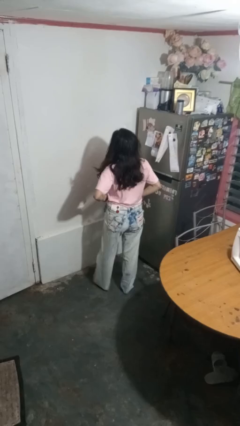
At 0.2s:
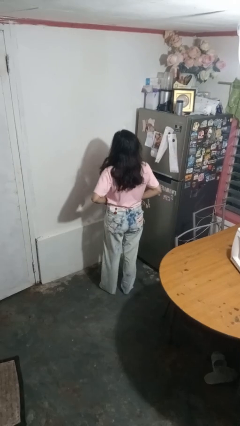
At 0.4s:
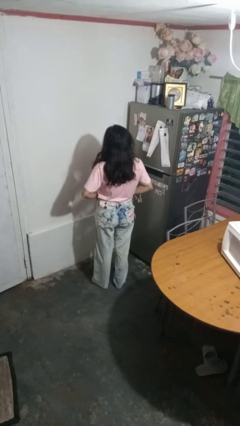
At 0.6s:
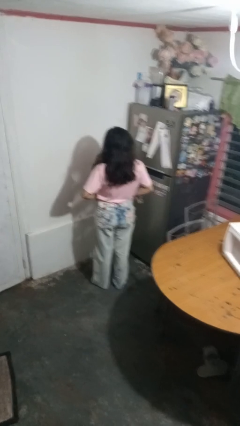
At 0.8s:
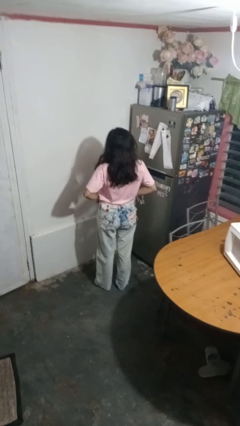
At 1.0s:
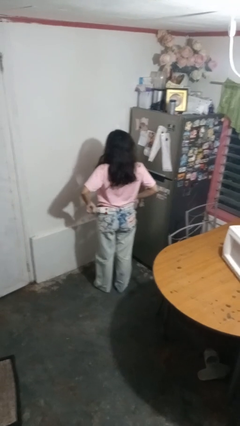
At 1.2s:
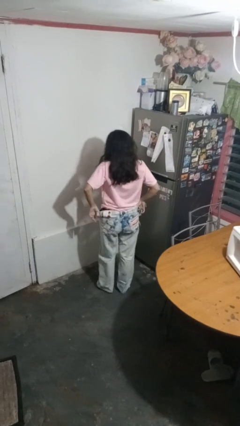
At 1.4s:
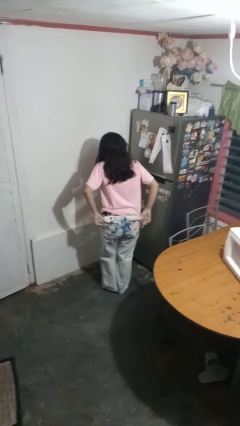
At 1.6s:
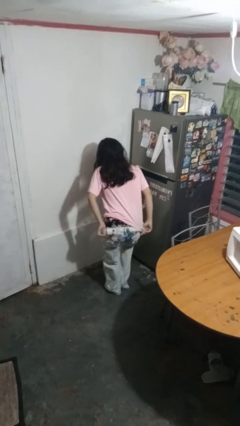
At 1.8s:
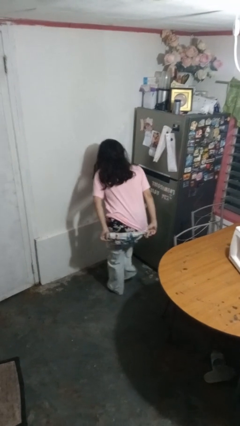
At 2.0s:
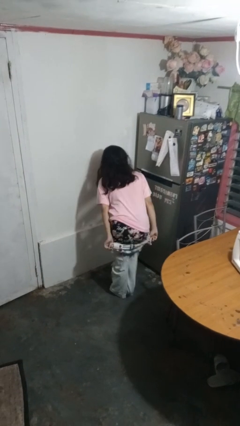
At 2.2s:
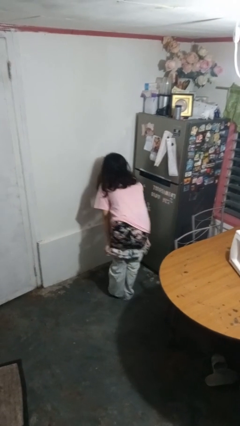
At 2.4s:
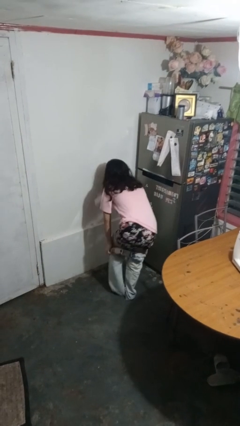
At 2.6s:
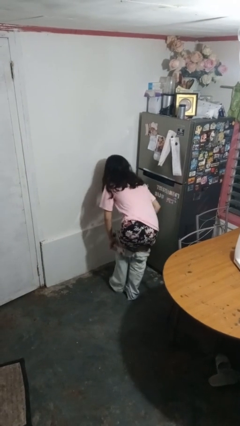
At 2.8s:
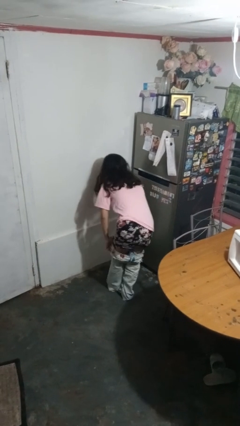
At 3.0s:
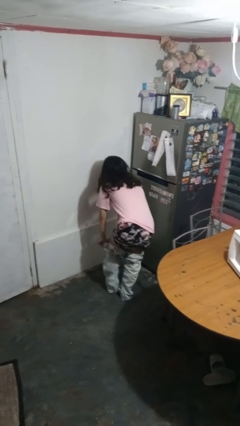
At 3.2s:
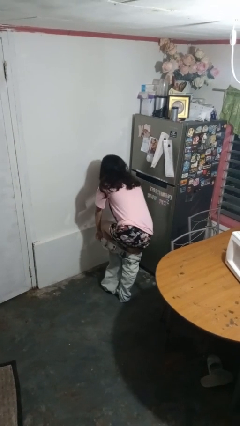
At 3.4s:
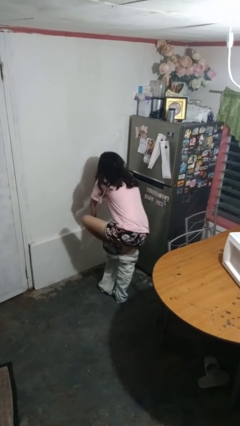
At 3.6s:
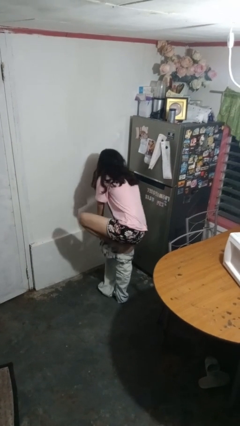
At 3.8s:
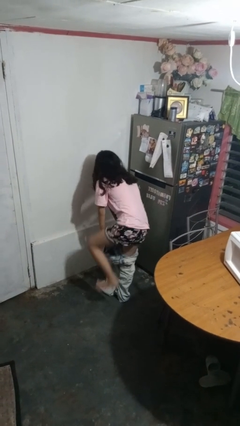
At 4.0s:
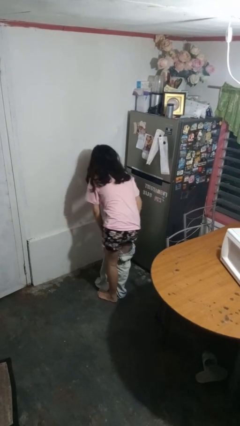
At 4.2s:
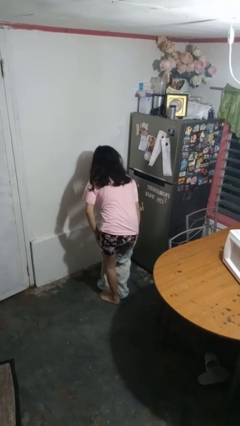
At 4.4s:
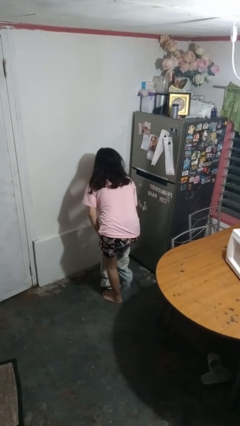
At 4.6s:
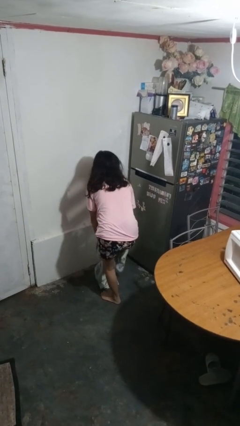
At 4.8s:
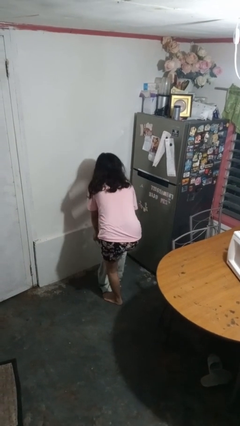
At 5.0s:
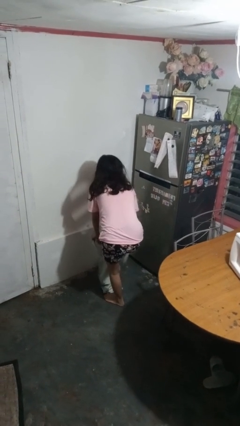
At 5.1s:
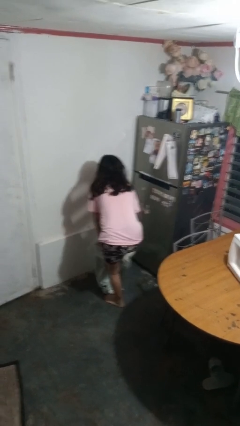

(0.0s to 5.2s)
person takes off pants

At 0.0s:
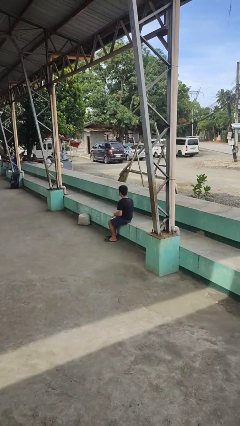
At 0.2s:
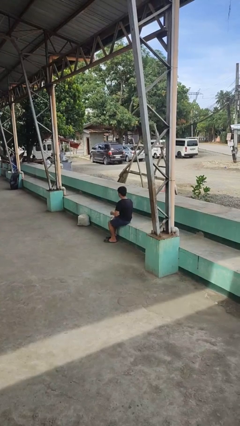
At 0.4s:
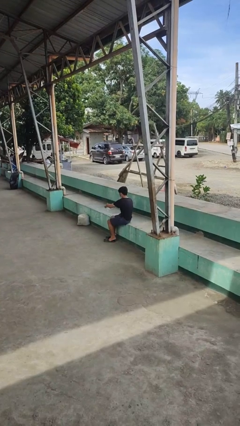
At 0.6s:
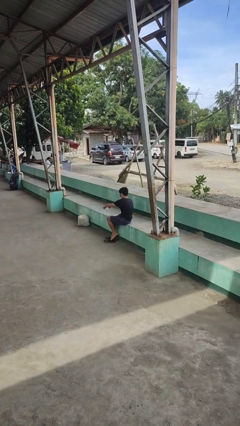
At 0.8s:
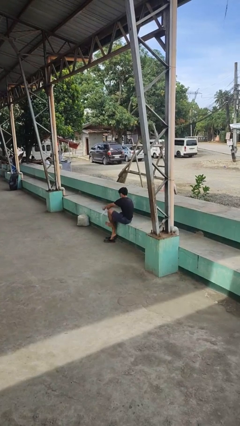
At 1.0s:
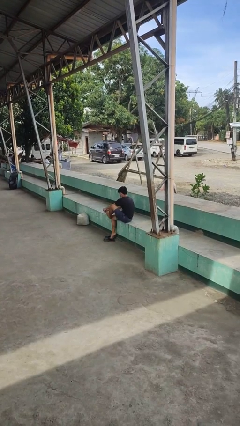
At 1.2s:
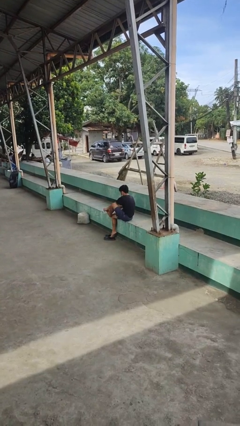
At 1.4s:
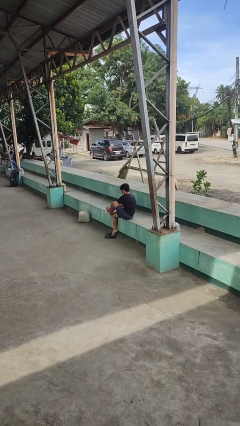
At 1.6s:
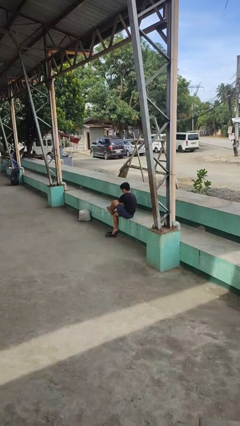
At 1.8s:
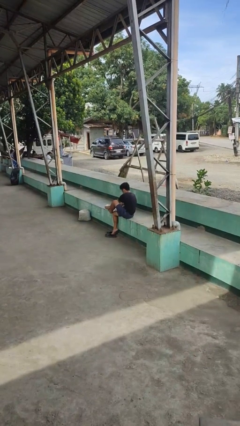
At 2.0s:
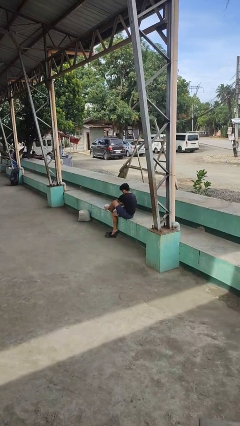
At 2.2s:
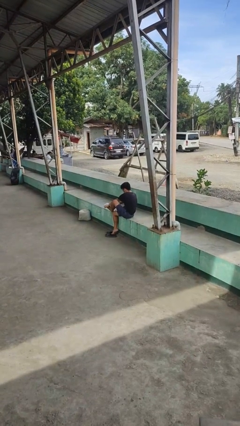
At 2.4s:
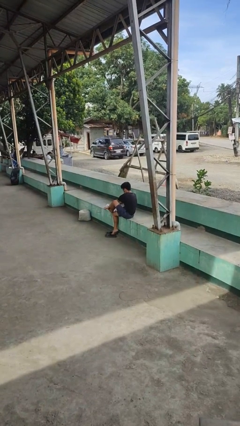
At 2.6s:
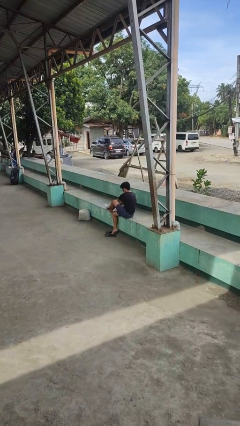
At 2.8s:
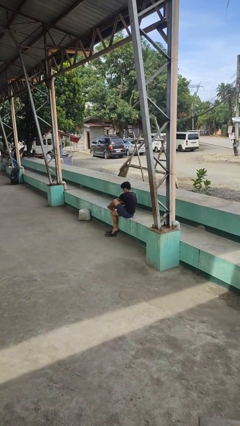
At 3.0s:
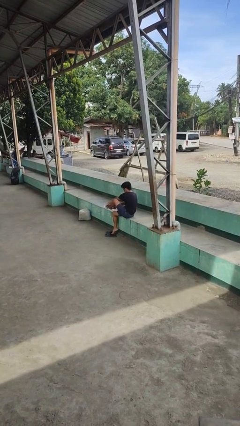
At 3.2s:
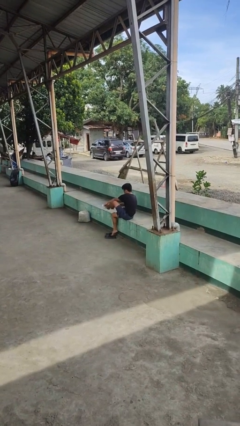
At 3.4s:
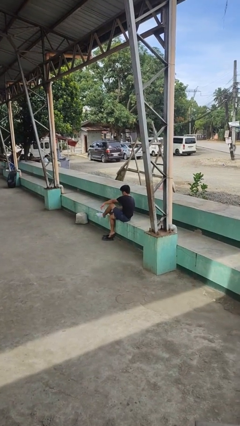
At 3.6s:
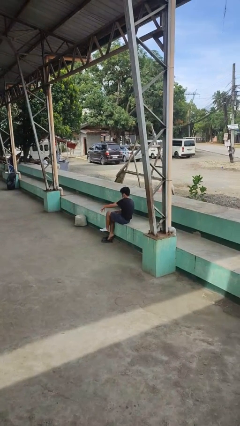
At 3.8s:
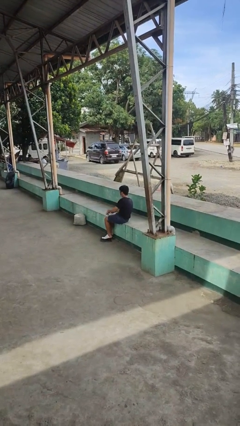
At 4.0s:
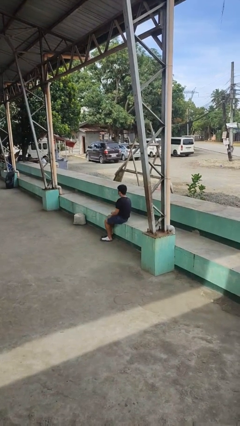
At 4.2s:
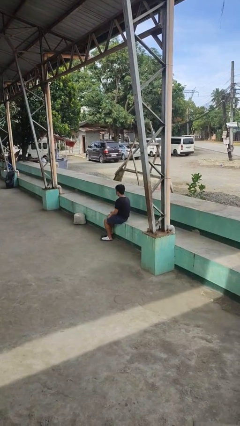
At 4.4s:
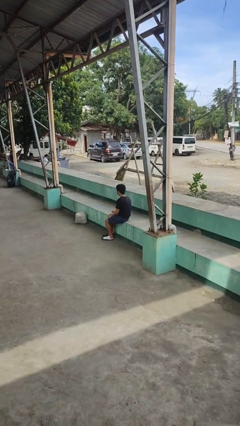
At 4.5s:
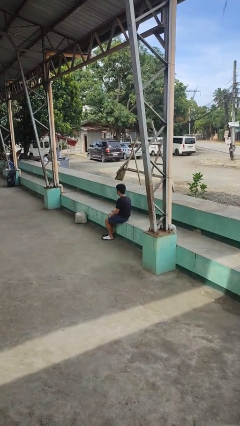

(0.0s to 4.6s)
person puts on socks

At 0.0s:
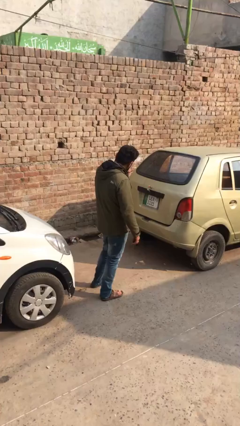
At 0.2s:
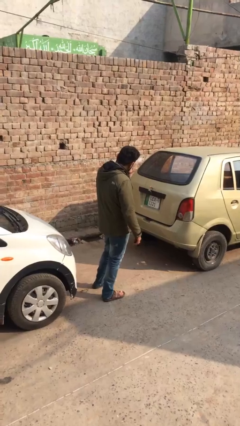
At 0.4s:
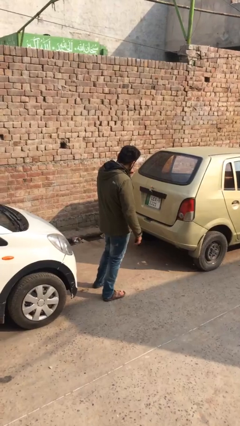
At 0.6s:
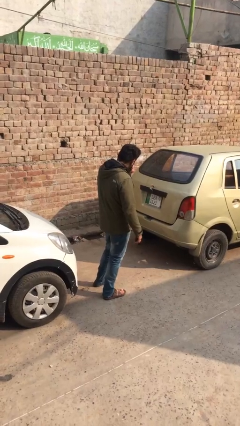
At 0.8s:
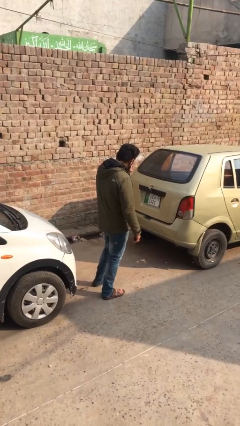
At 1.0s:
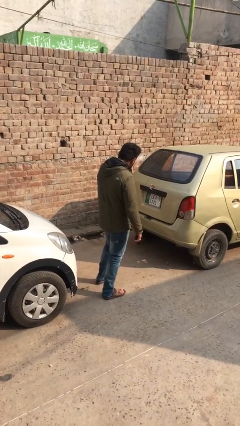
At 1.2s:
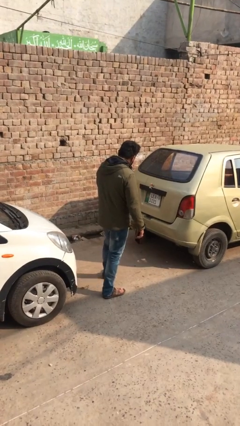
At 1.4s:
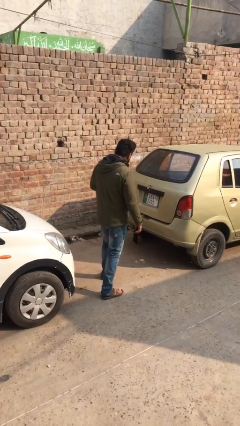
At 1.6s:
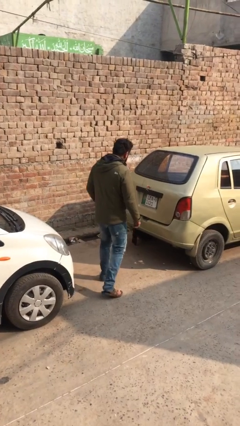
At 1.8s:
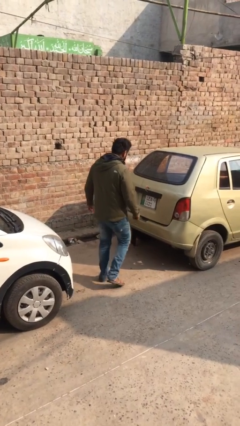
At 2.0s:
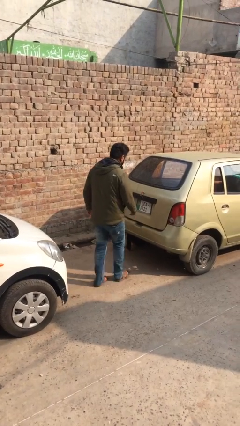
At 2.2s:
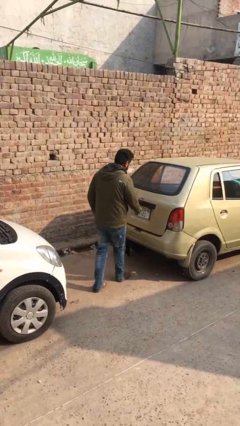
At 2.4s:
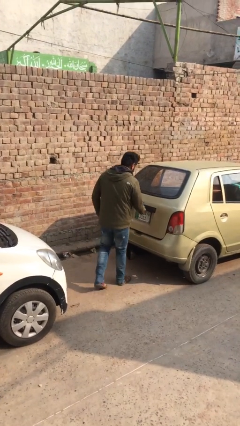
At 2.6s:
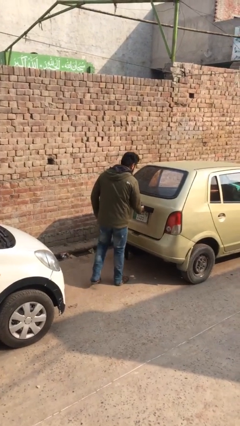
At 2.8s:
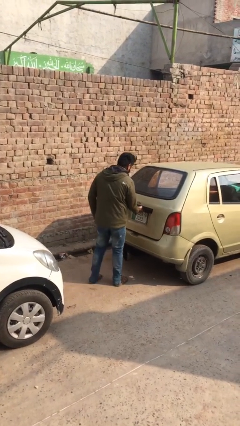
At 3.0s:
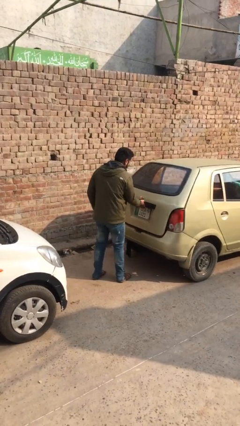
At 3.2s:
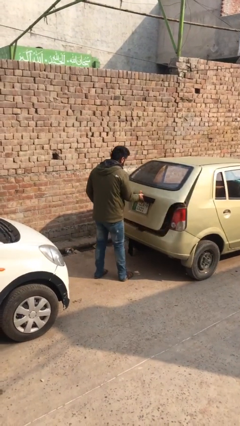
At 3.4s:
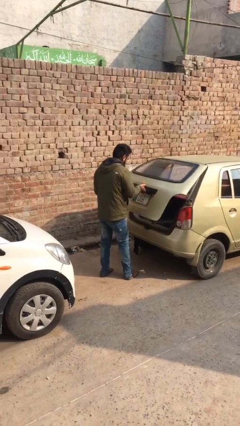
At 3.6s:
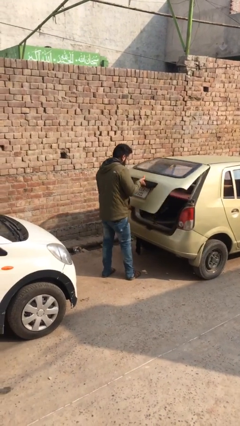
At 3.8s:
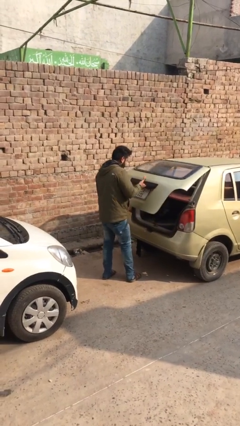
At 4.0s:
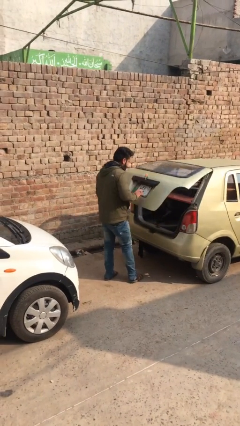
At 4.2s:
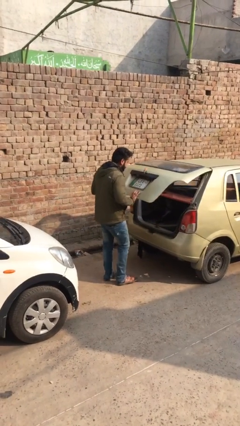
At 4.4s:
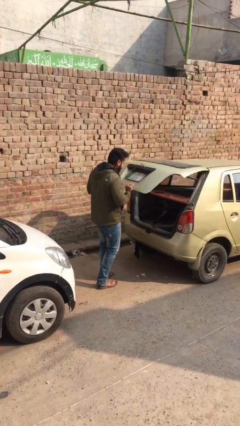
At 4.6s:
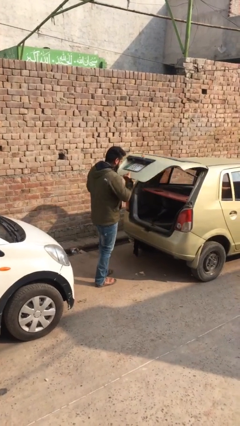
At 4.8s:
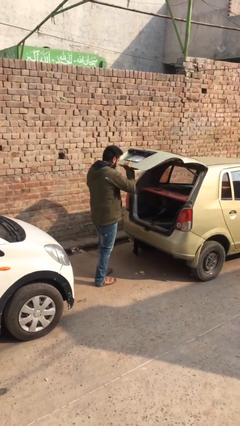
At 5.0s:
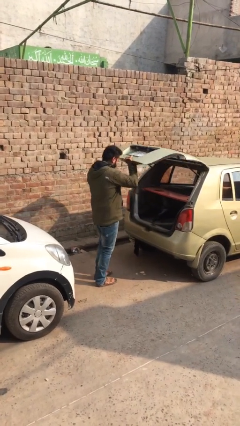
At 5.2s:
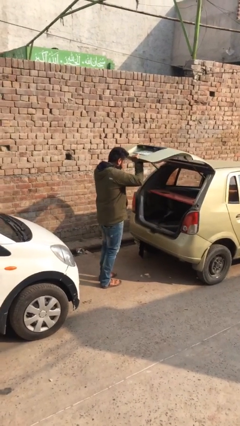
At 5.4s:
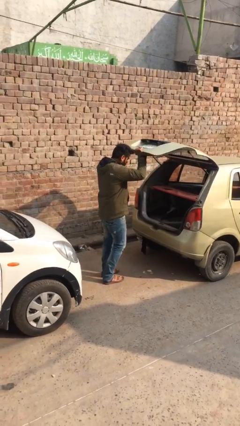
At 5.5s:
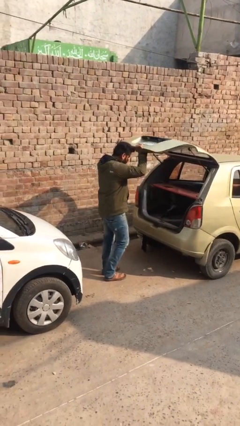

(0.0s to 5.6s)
person opens car trunk

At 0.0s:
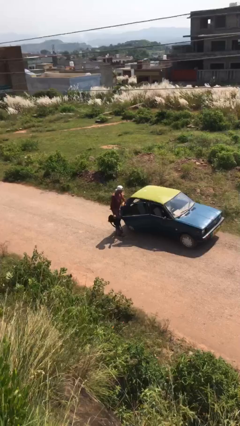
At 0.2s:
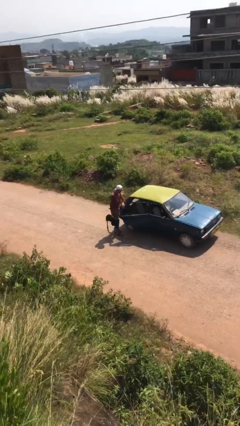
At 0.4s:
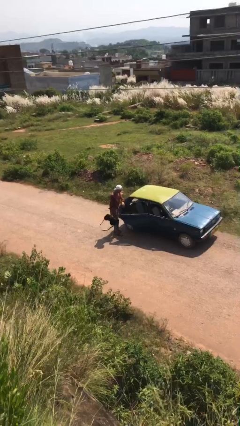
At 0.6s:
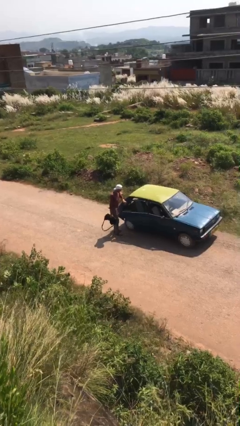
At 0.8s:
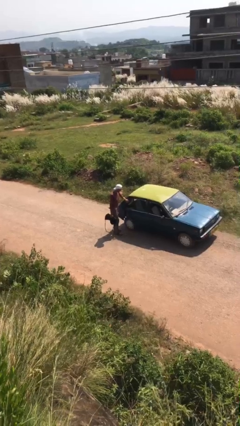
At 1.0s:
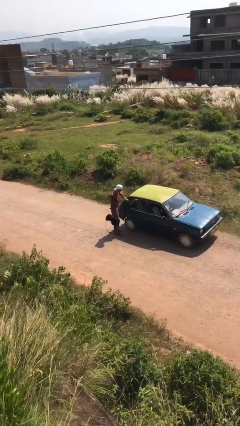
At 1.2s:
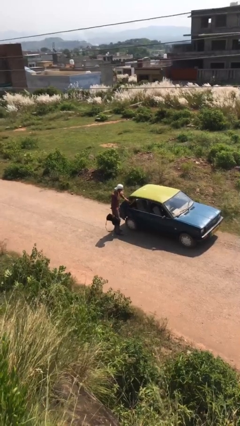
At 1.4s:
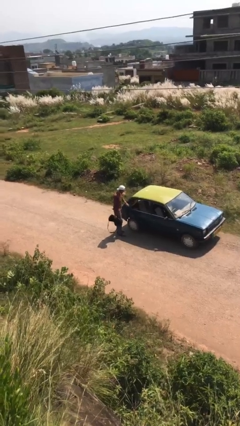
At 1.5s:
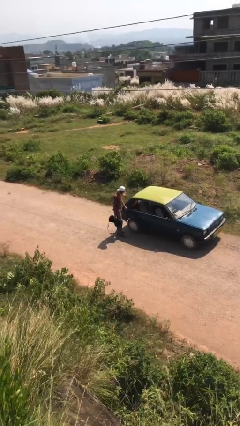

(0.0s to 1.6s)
person closes car door

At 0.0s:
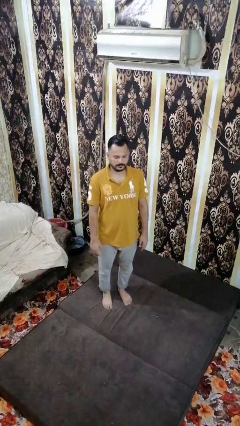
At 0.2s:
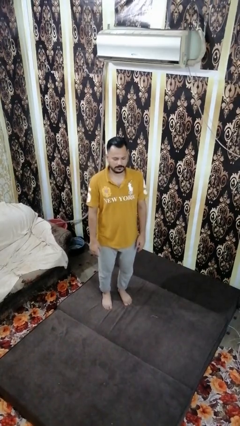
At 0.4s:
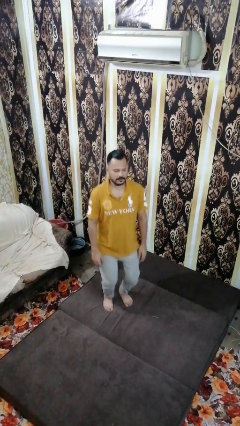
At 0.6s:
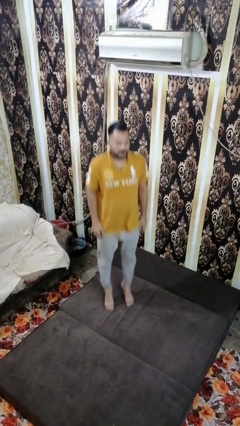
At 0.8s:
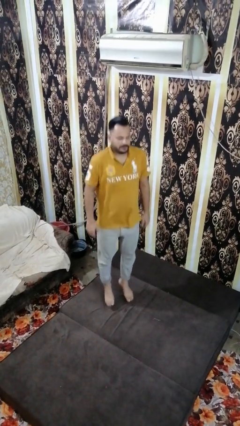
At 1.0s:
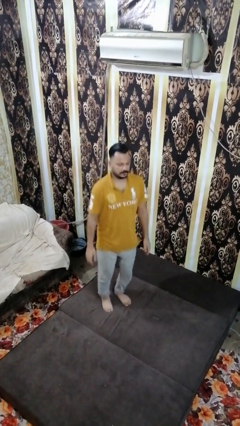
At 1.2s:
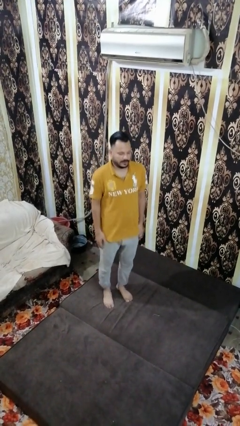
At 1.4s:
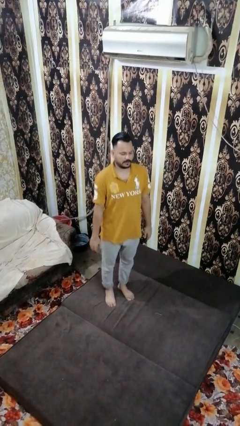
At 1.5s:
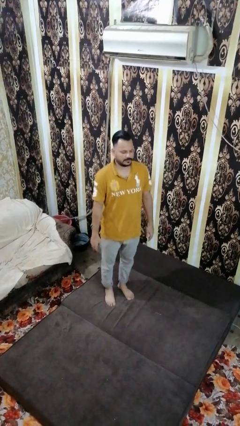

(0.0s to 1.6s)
person jumps on bed
